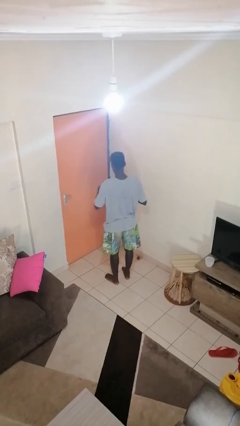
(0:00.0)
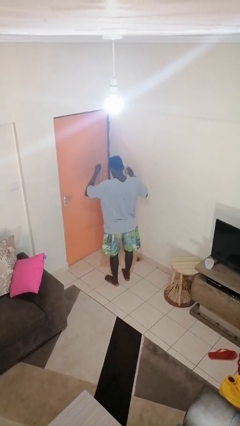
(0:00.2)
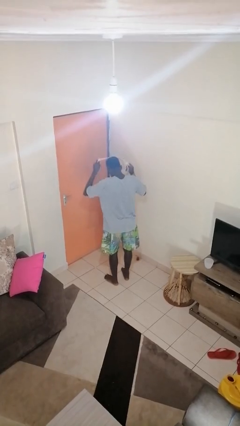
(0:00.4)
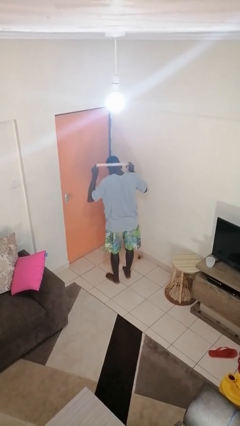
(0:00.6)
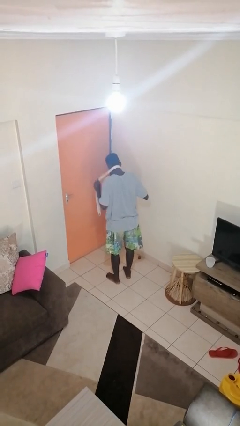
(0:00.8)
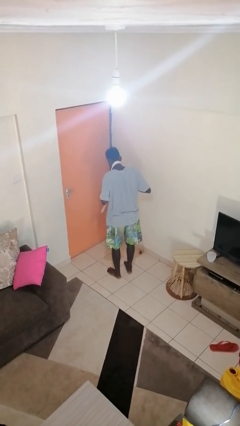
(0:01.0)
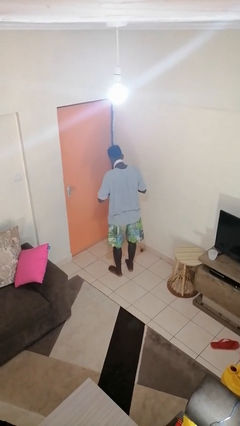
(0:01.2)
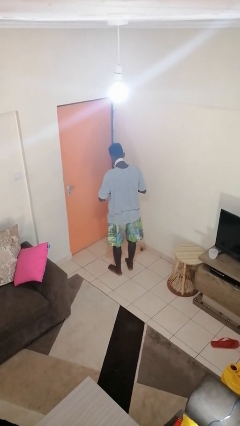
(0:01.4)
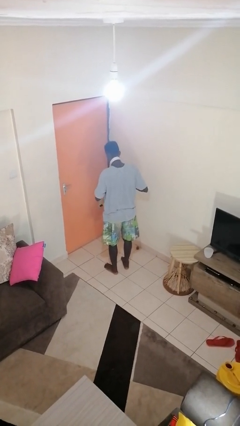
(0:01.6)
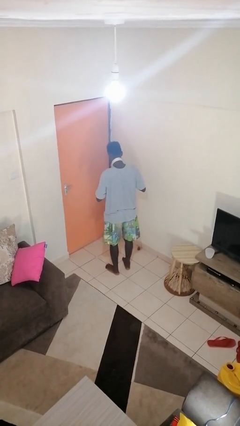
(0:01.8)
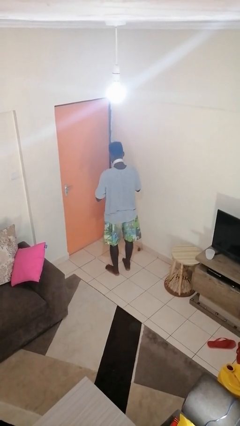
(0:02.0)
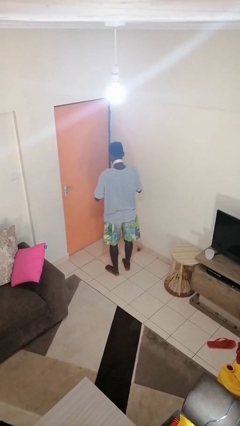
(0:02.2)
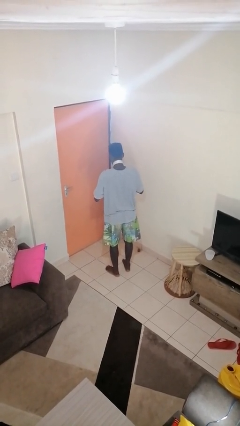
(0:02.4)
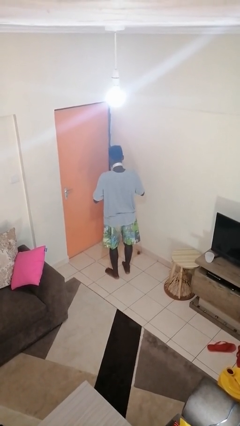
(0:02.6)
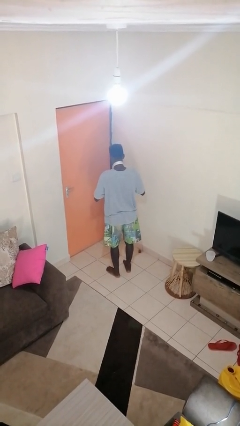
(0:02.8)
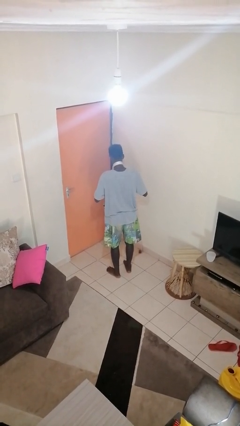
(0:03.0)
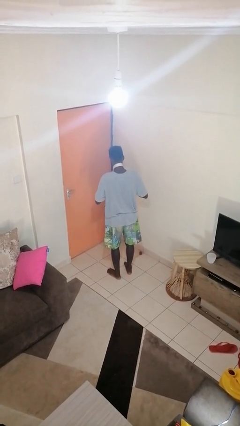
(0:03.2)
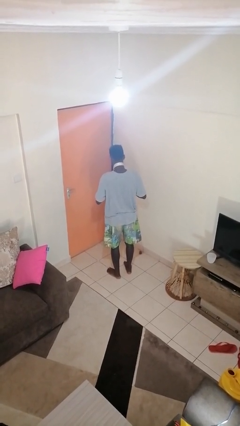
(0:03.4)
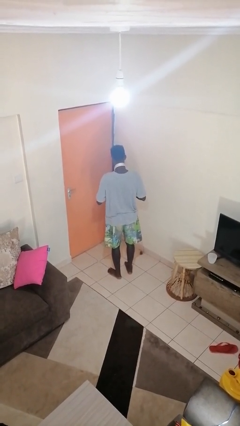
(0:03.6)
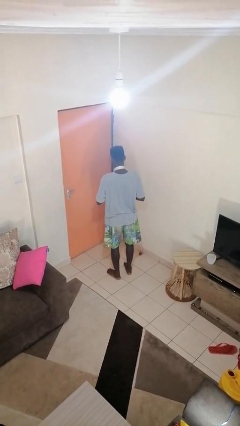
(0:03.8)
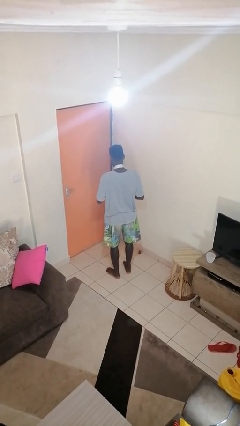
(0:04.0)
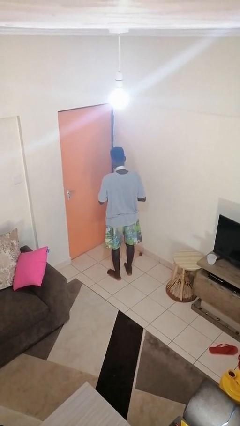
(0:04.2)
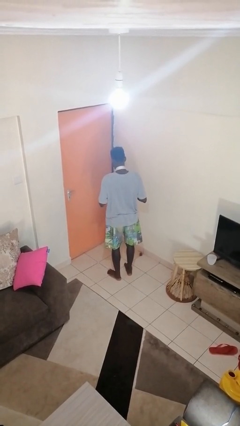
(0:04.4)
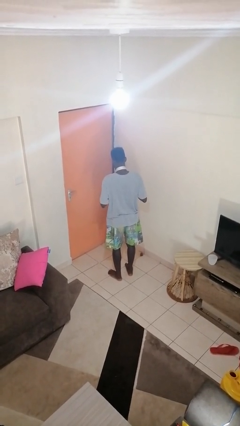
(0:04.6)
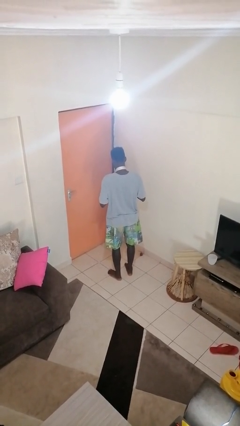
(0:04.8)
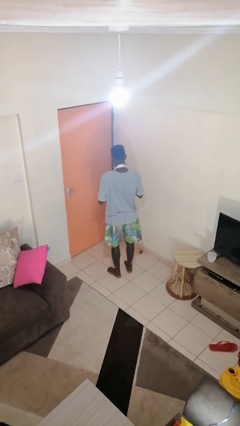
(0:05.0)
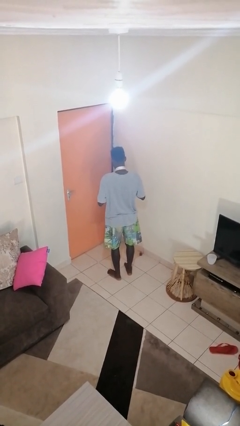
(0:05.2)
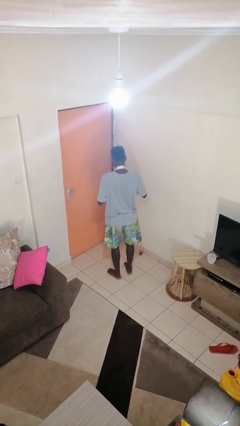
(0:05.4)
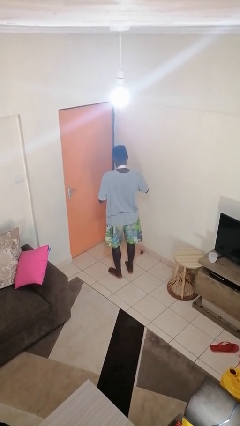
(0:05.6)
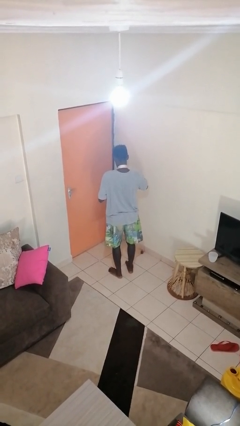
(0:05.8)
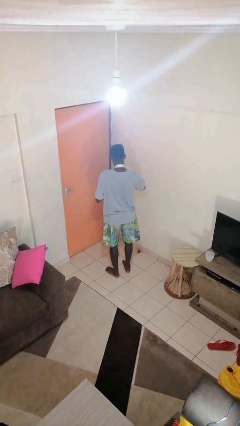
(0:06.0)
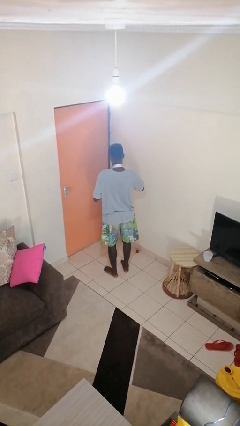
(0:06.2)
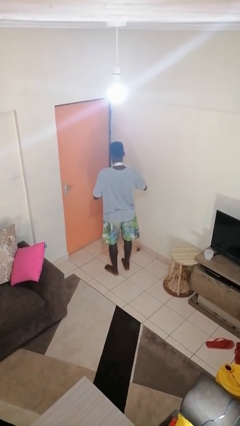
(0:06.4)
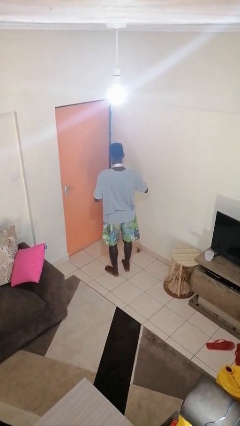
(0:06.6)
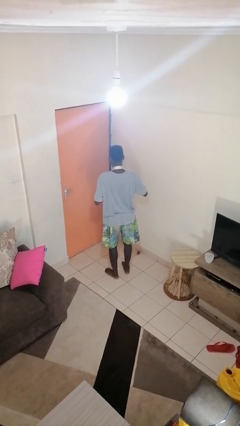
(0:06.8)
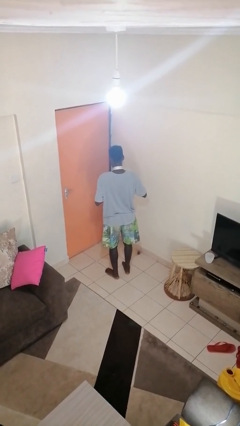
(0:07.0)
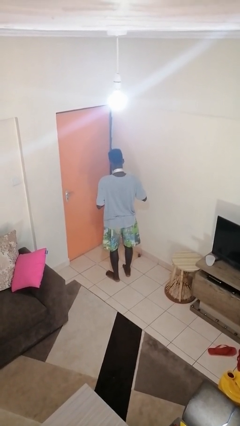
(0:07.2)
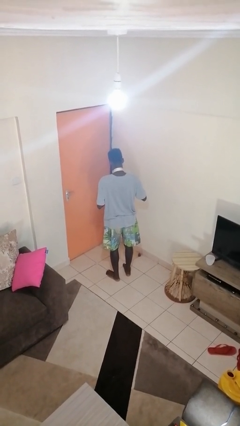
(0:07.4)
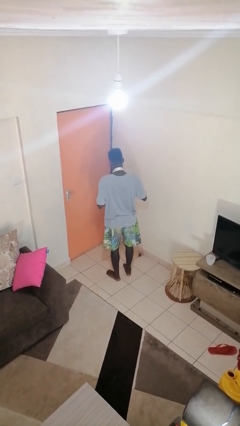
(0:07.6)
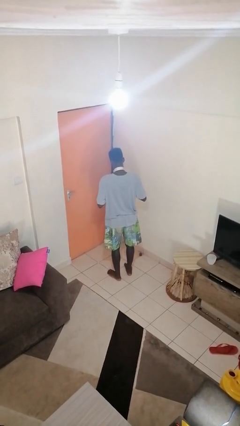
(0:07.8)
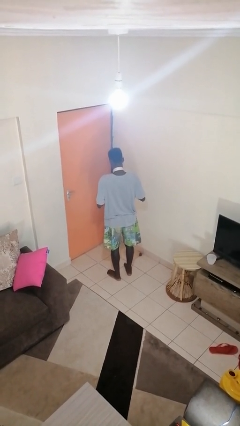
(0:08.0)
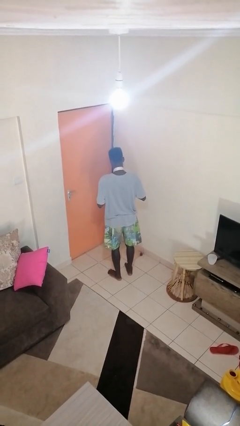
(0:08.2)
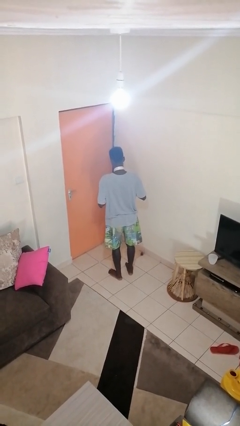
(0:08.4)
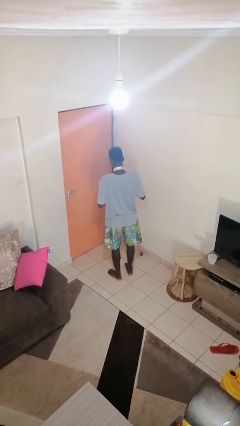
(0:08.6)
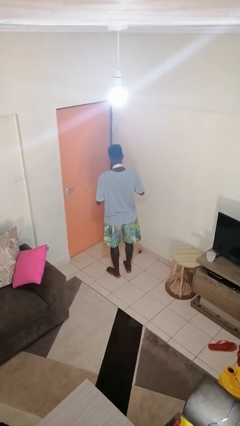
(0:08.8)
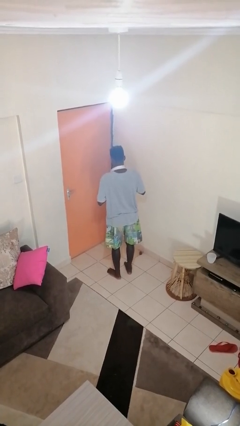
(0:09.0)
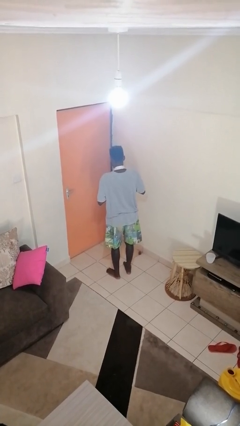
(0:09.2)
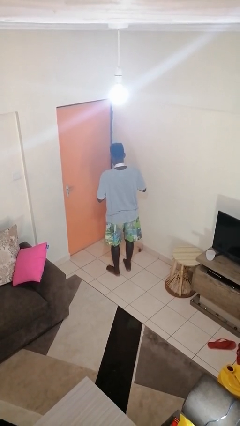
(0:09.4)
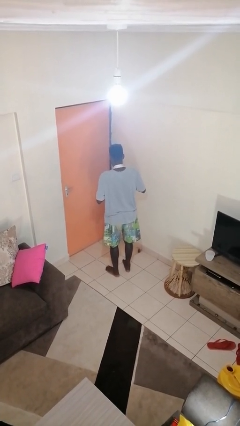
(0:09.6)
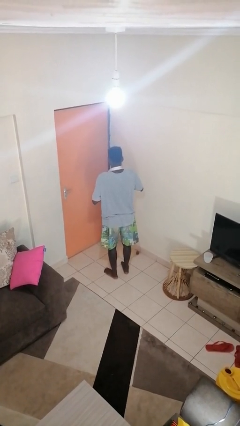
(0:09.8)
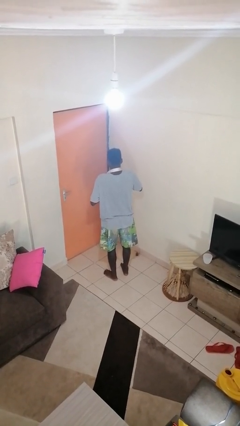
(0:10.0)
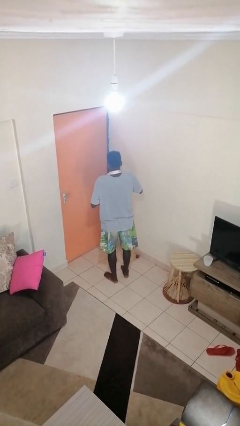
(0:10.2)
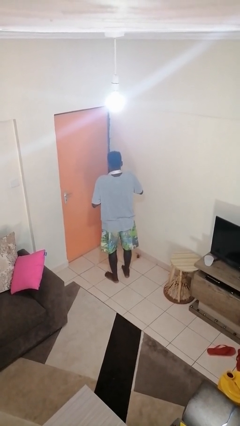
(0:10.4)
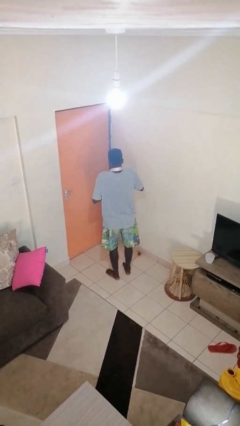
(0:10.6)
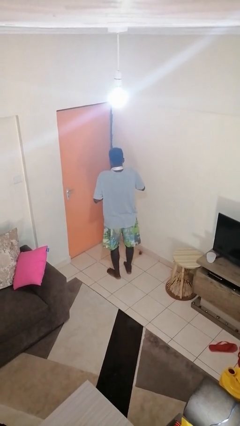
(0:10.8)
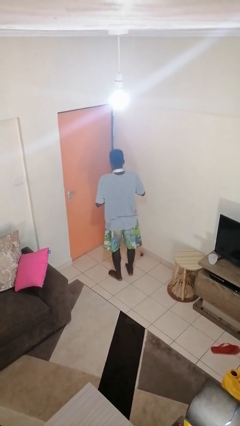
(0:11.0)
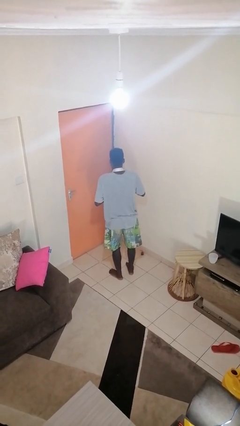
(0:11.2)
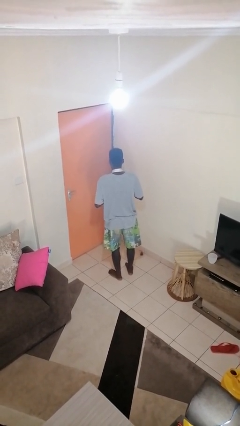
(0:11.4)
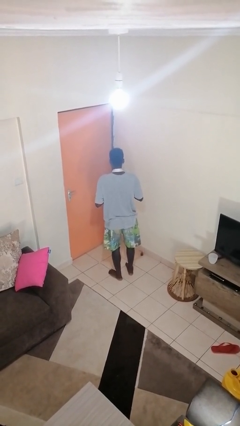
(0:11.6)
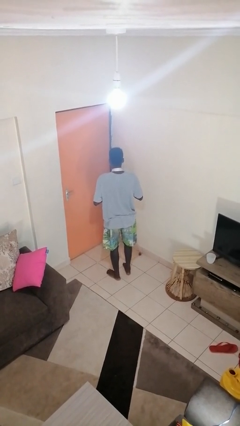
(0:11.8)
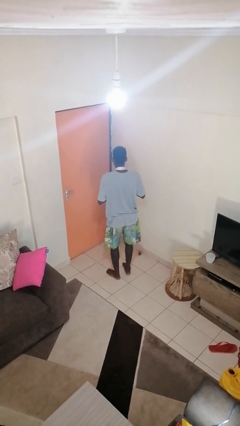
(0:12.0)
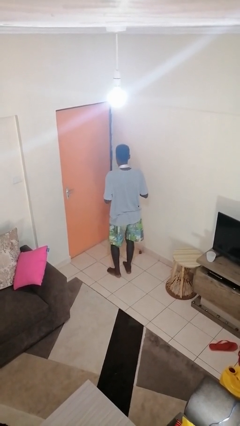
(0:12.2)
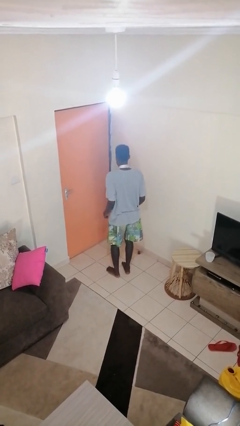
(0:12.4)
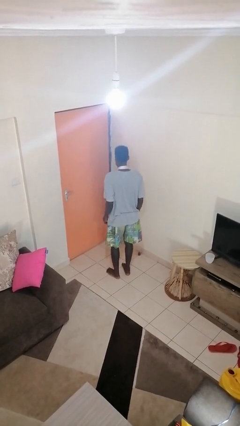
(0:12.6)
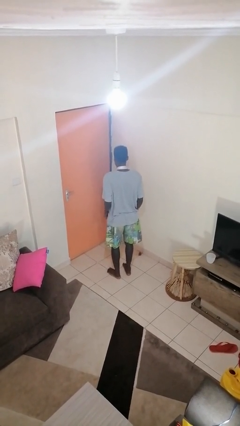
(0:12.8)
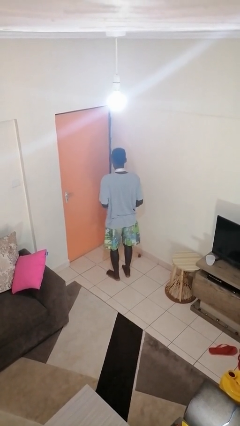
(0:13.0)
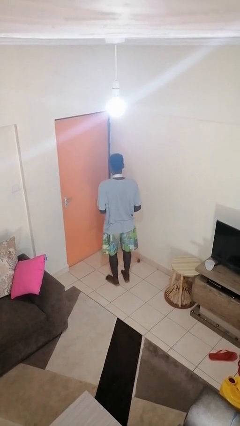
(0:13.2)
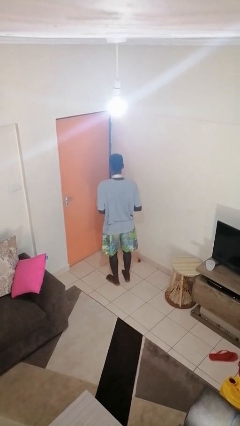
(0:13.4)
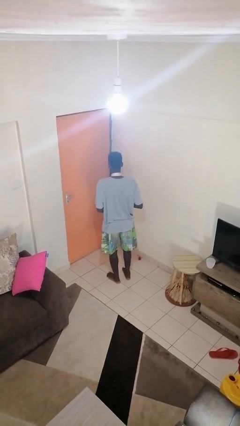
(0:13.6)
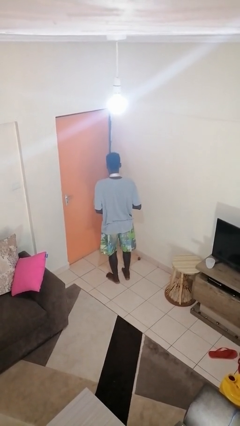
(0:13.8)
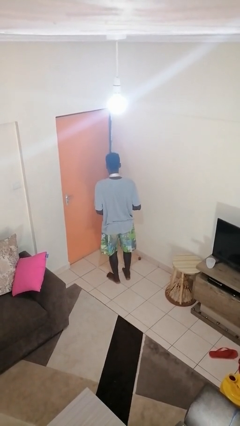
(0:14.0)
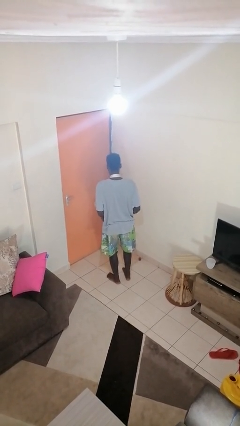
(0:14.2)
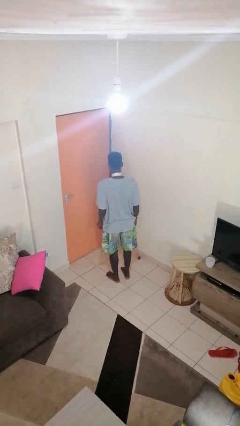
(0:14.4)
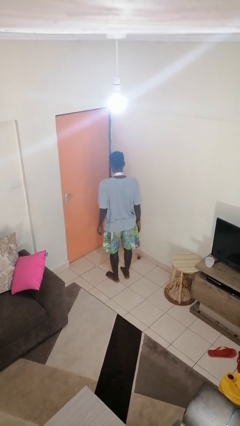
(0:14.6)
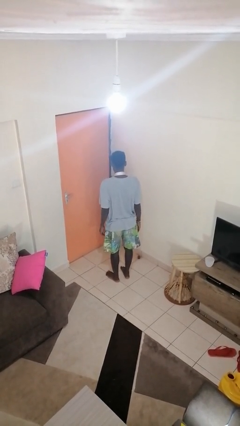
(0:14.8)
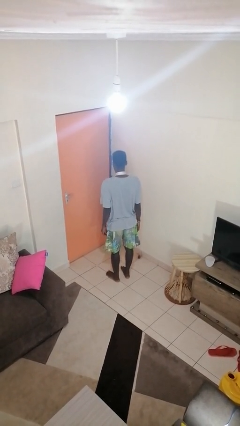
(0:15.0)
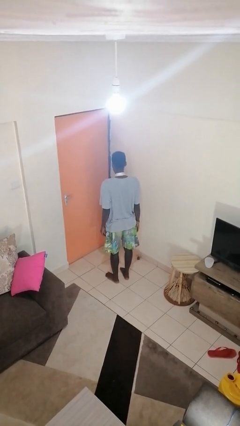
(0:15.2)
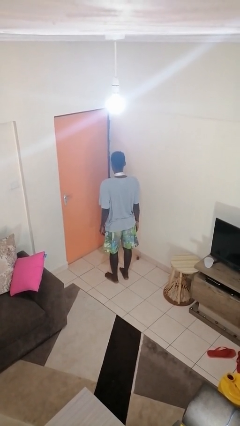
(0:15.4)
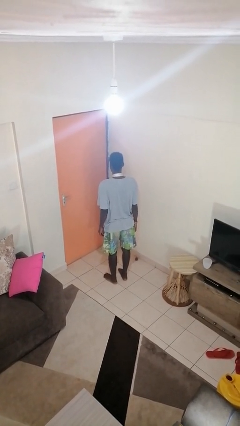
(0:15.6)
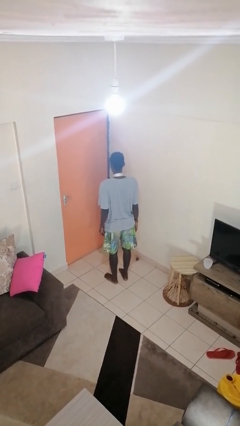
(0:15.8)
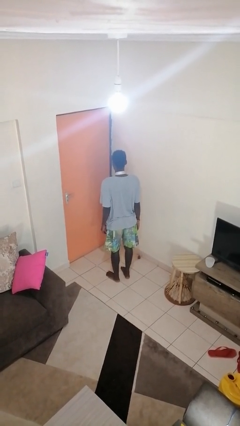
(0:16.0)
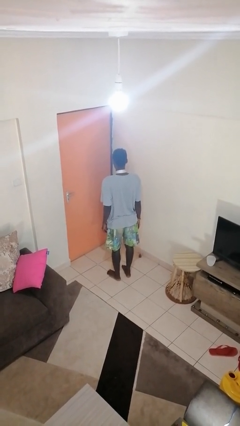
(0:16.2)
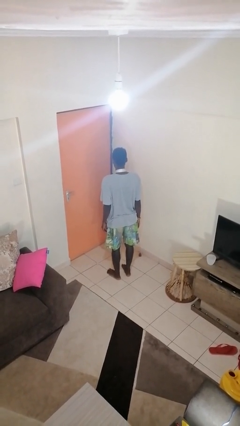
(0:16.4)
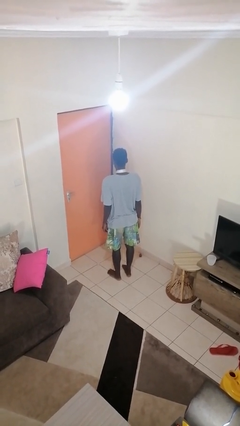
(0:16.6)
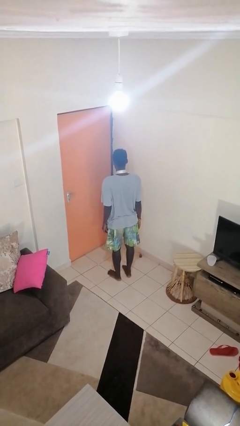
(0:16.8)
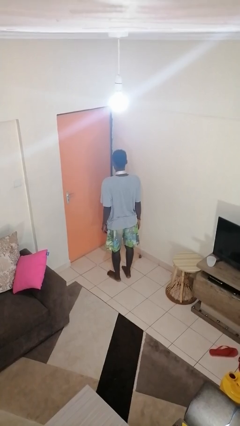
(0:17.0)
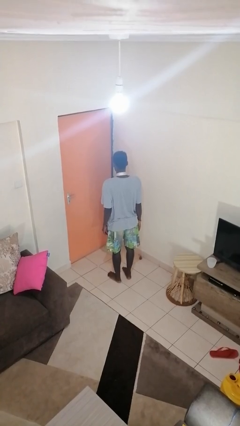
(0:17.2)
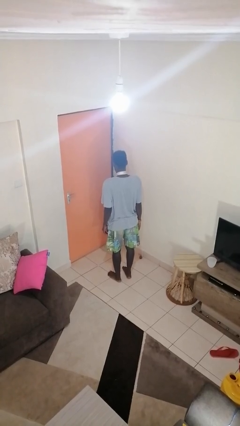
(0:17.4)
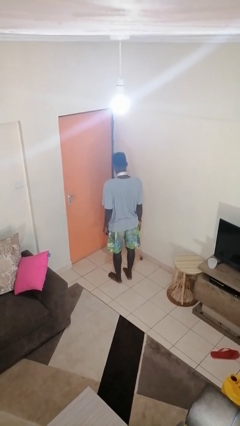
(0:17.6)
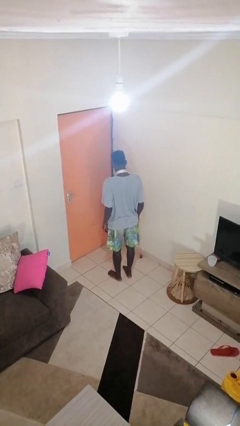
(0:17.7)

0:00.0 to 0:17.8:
person puts on necktie

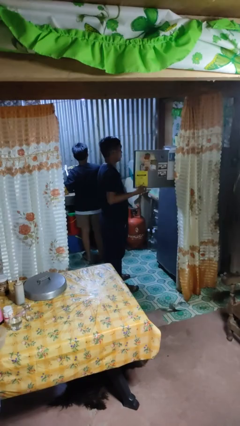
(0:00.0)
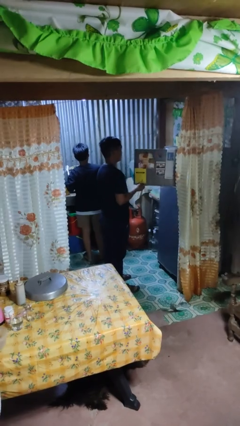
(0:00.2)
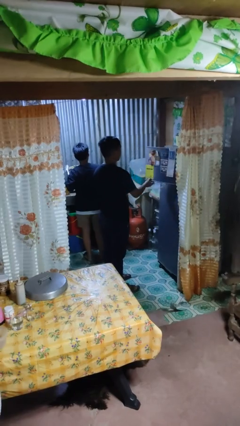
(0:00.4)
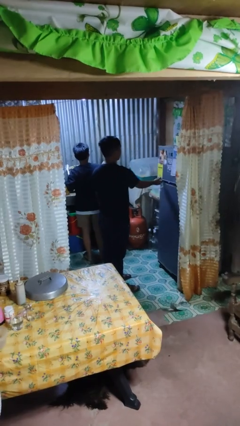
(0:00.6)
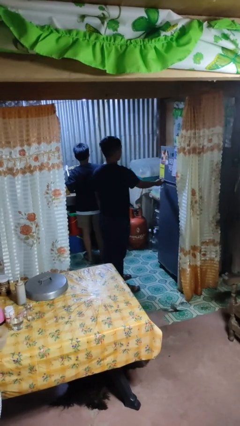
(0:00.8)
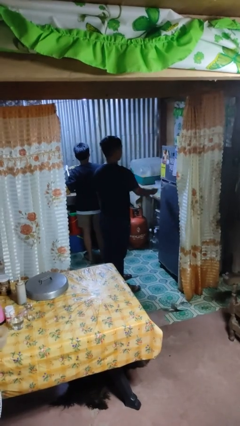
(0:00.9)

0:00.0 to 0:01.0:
person closes refrigerator
